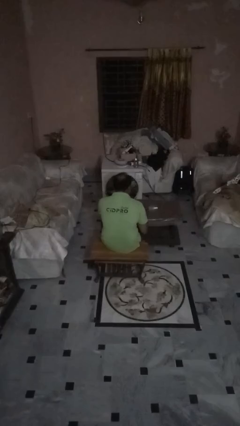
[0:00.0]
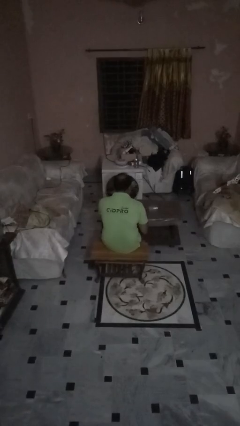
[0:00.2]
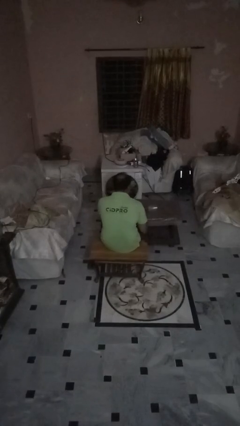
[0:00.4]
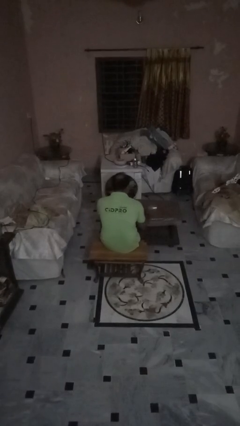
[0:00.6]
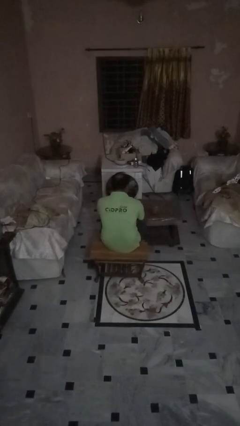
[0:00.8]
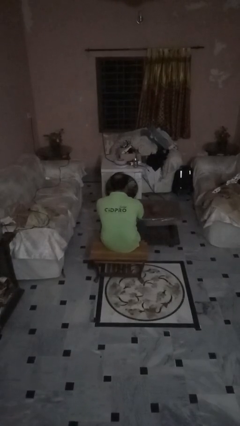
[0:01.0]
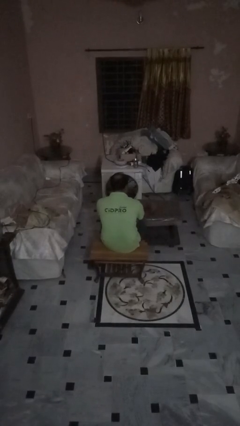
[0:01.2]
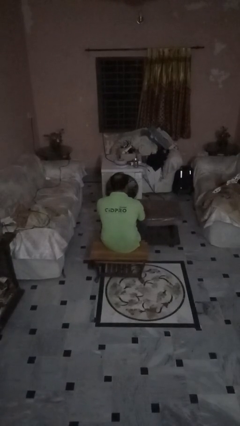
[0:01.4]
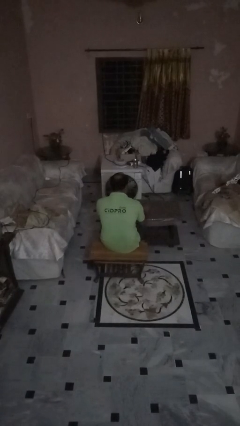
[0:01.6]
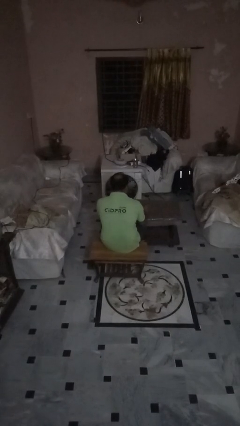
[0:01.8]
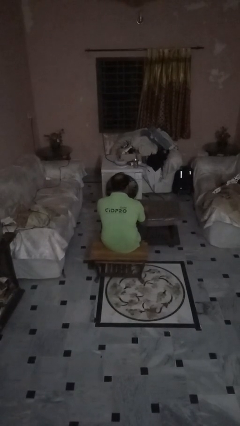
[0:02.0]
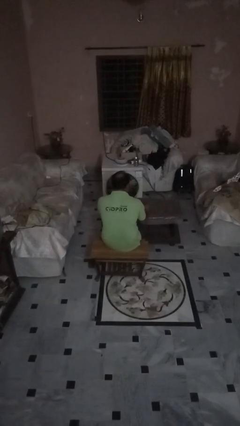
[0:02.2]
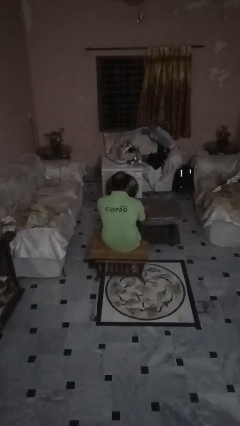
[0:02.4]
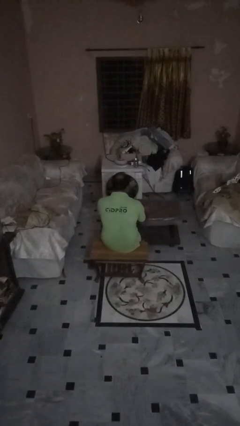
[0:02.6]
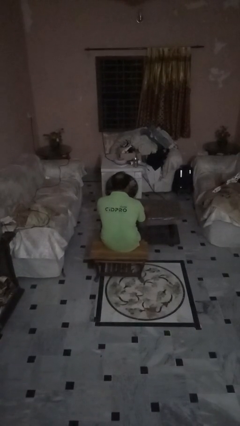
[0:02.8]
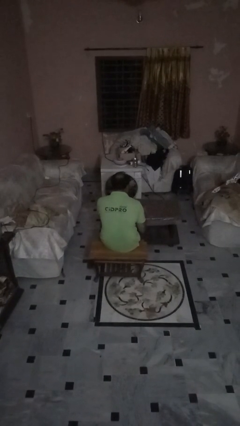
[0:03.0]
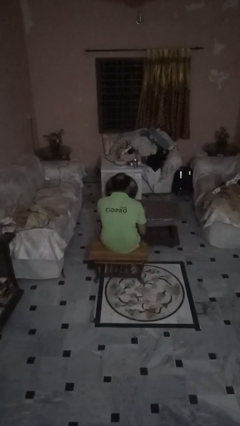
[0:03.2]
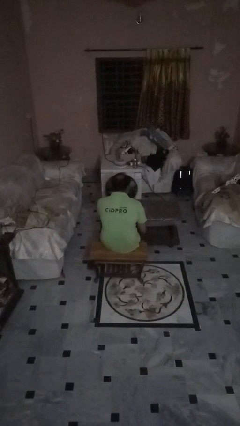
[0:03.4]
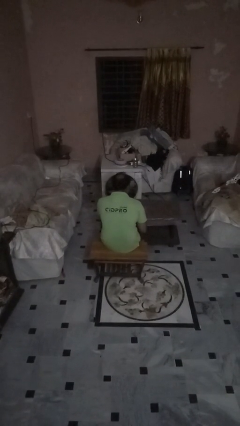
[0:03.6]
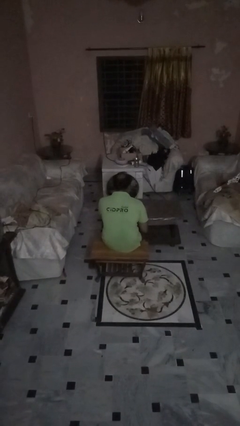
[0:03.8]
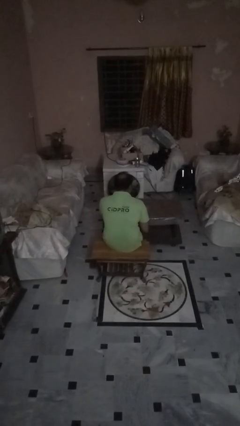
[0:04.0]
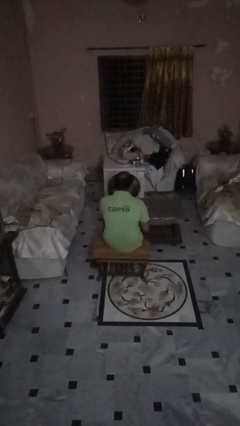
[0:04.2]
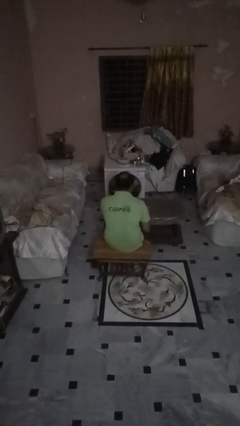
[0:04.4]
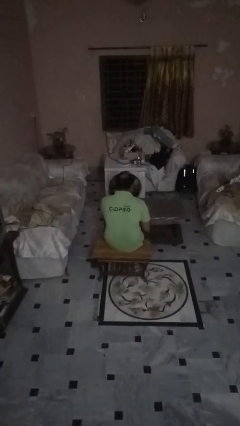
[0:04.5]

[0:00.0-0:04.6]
person sets upright glass

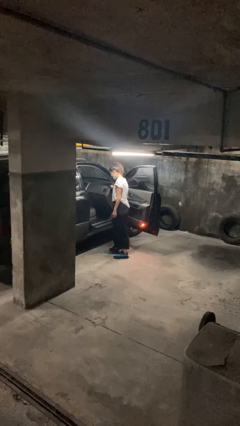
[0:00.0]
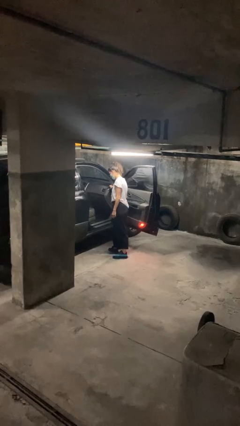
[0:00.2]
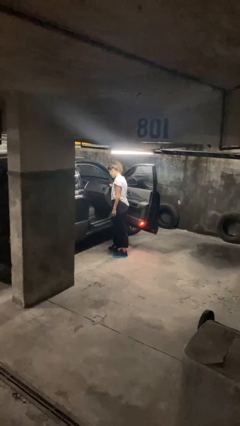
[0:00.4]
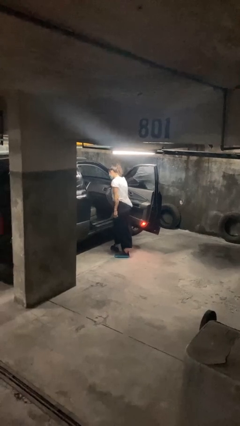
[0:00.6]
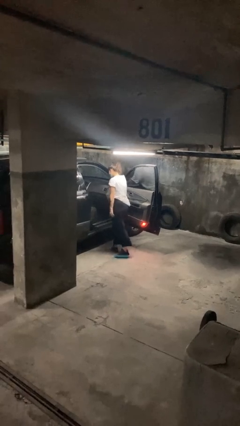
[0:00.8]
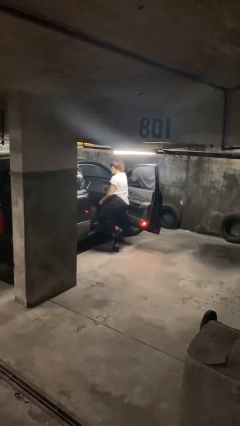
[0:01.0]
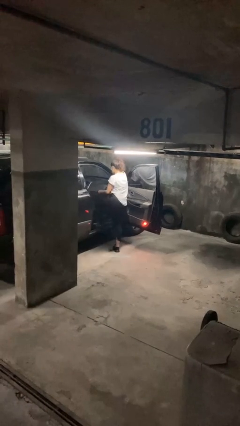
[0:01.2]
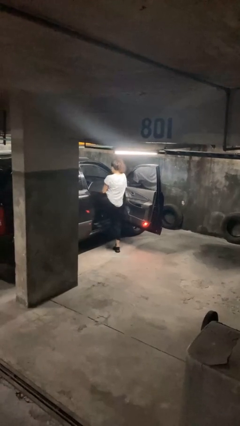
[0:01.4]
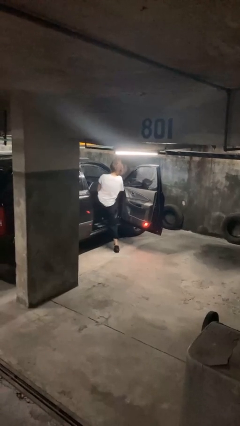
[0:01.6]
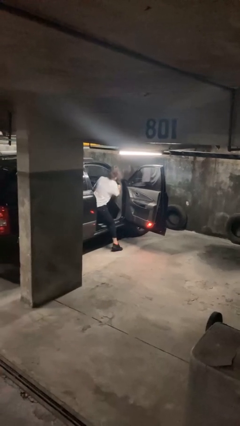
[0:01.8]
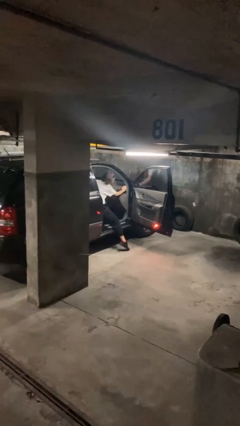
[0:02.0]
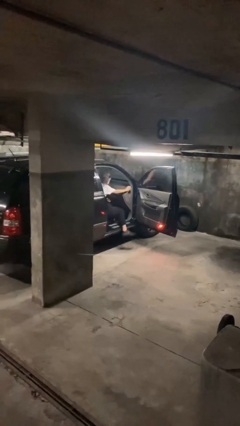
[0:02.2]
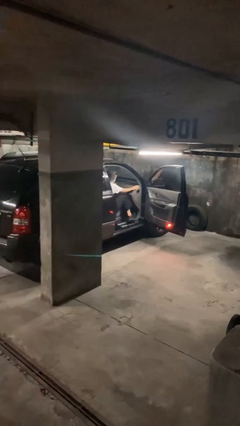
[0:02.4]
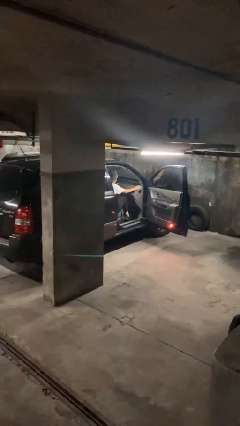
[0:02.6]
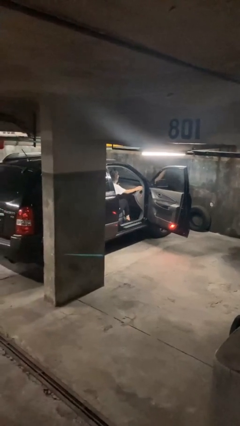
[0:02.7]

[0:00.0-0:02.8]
person enters car

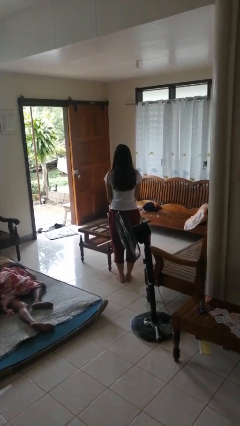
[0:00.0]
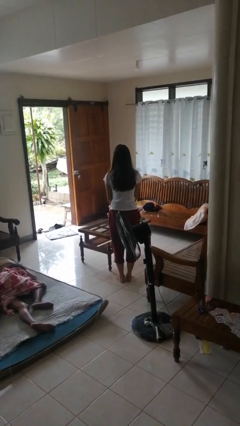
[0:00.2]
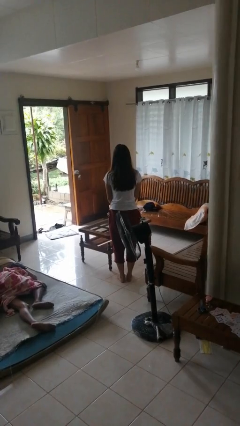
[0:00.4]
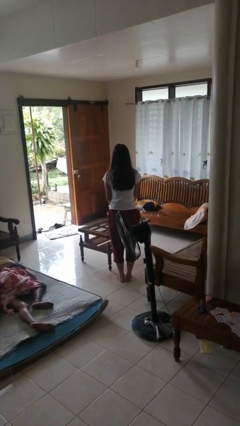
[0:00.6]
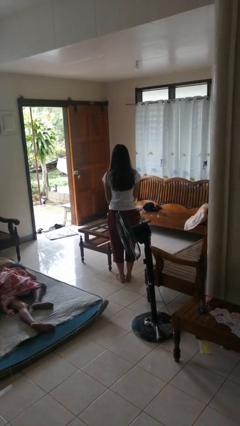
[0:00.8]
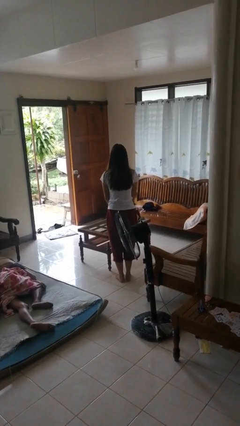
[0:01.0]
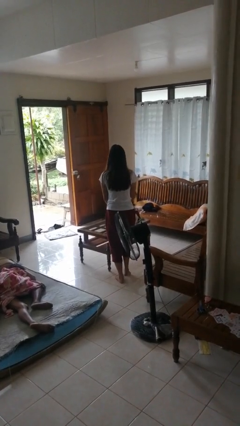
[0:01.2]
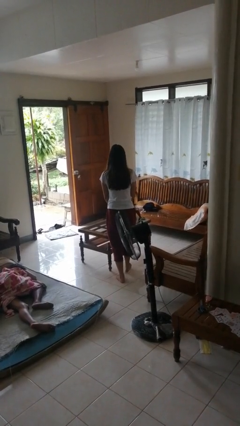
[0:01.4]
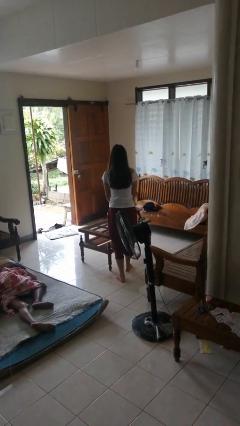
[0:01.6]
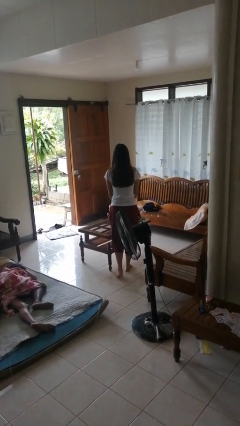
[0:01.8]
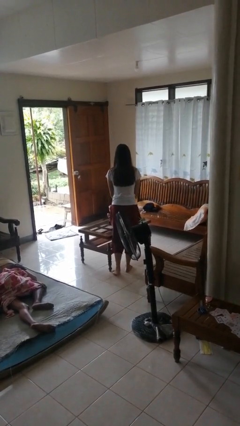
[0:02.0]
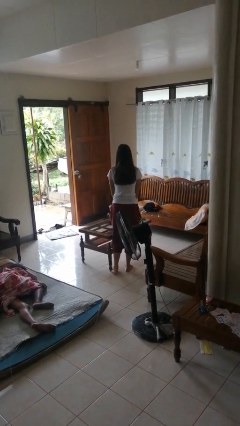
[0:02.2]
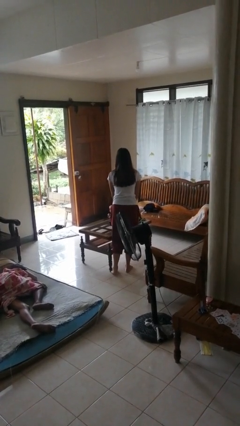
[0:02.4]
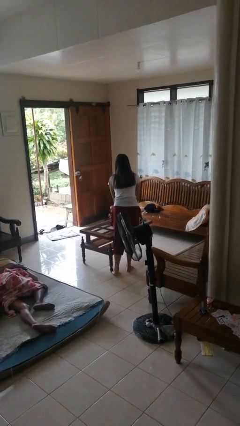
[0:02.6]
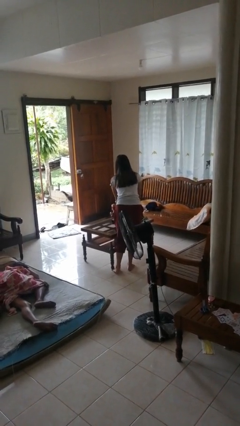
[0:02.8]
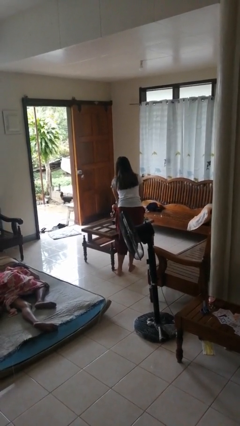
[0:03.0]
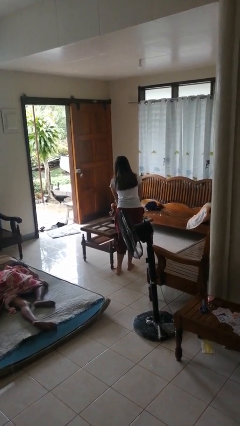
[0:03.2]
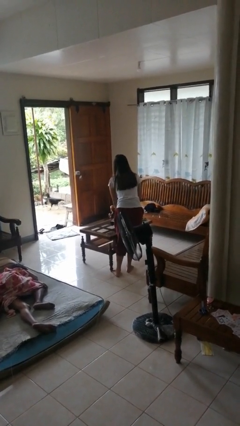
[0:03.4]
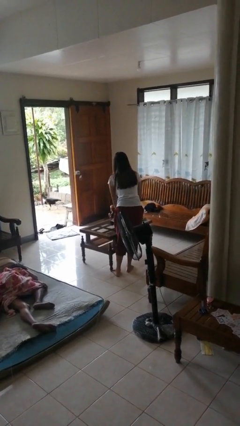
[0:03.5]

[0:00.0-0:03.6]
person bumps into table

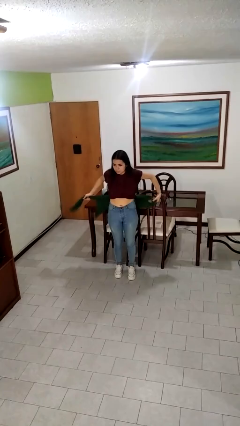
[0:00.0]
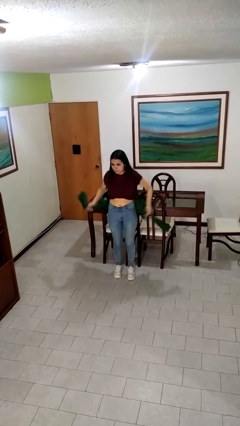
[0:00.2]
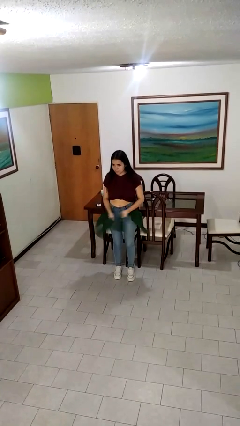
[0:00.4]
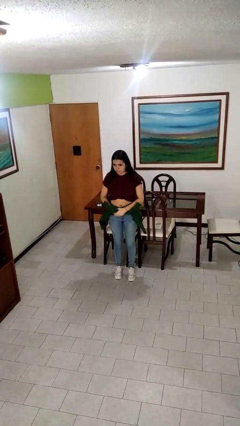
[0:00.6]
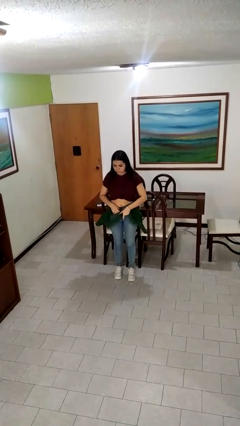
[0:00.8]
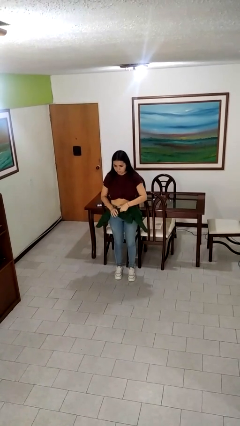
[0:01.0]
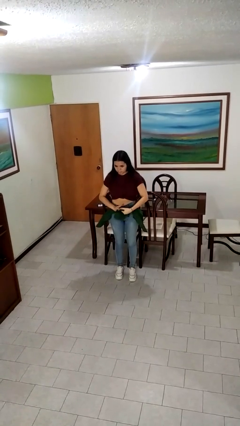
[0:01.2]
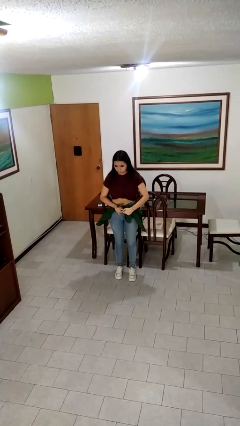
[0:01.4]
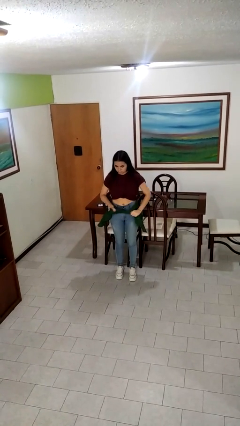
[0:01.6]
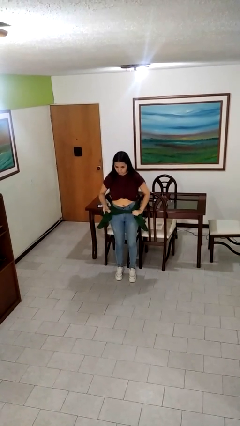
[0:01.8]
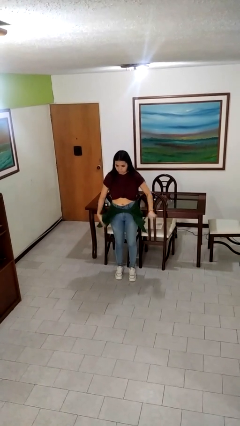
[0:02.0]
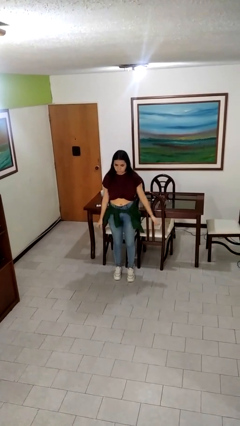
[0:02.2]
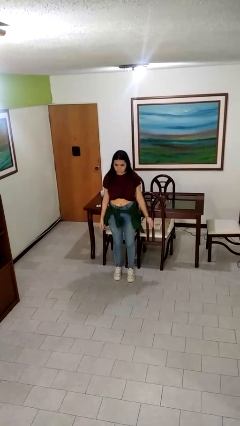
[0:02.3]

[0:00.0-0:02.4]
person ties jacket around waist

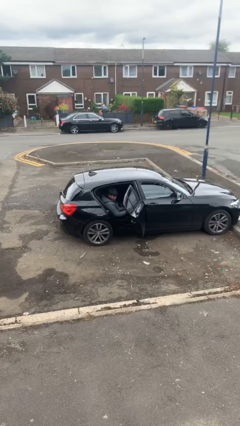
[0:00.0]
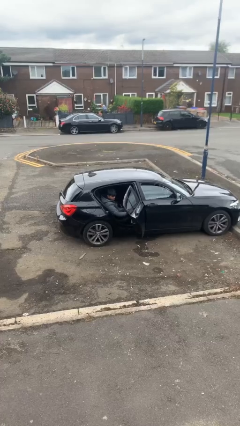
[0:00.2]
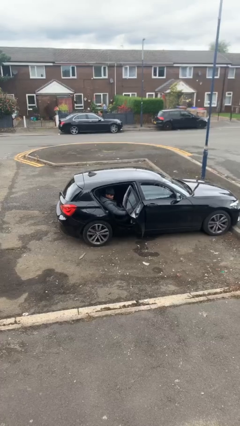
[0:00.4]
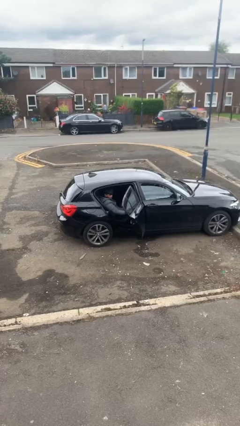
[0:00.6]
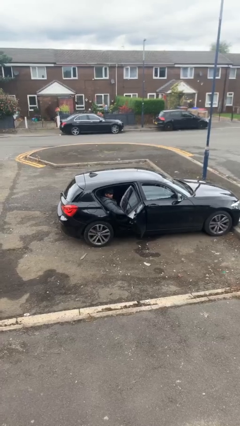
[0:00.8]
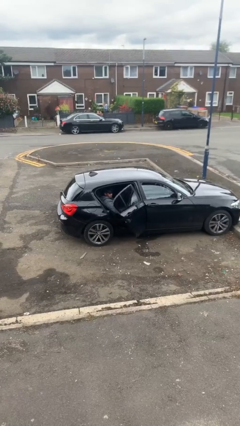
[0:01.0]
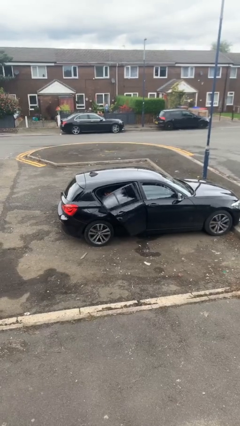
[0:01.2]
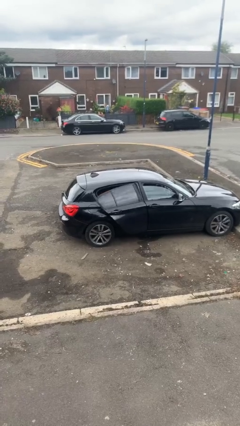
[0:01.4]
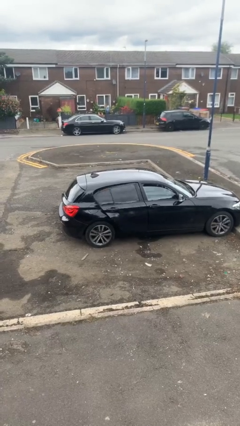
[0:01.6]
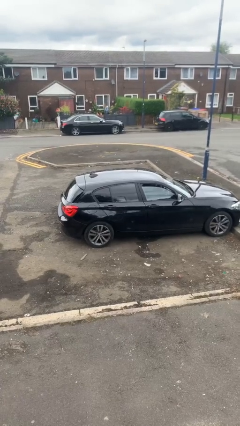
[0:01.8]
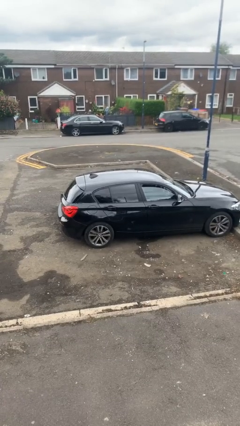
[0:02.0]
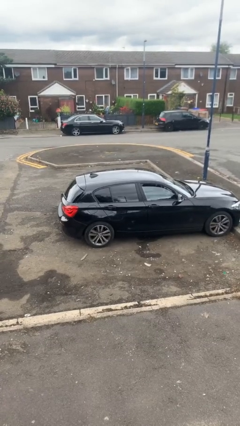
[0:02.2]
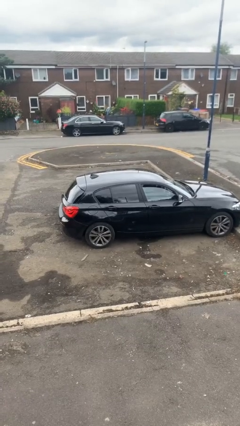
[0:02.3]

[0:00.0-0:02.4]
person closes car door

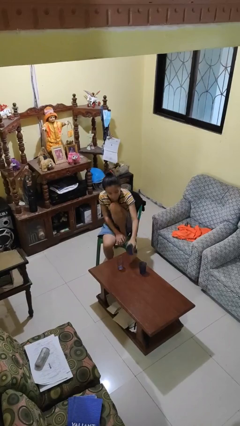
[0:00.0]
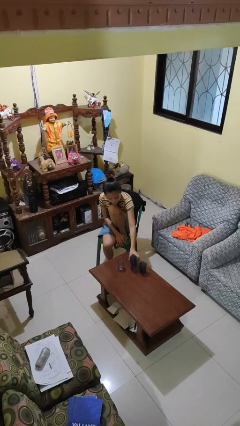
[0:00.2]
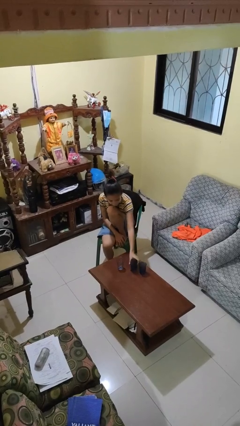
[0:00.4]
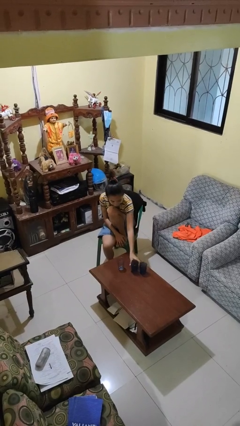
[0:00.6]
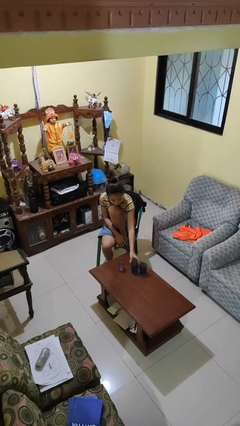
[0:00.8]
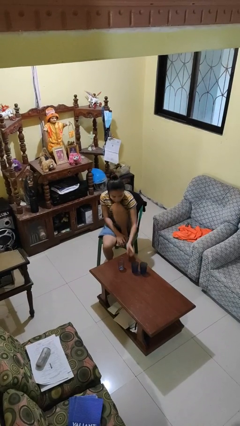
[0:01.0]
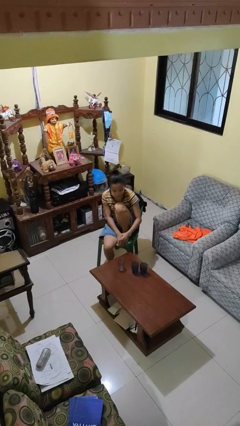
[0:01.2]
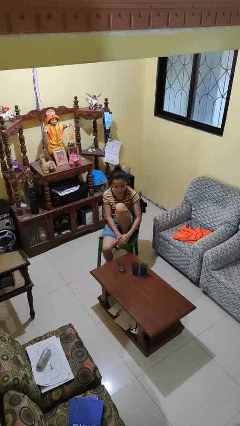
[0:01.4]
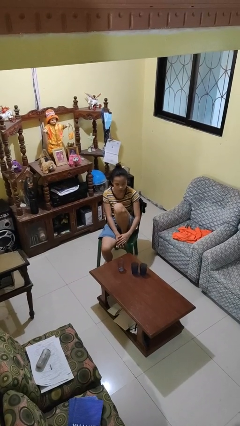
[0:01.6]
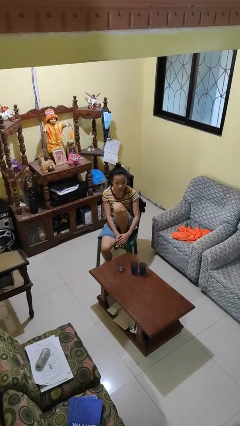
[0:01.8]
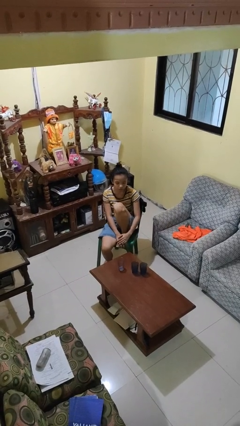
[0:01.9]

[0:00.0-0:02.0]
person puts down object on table
